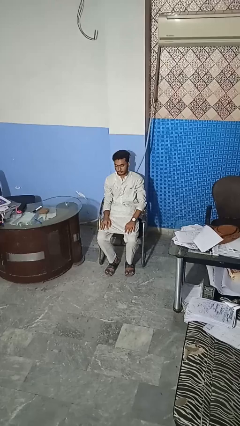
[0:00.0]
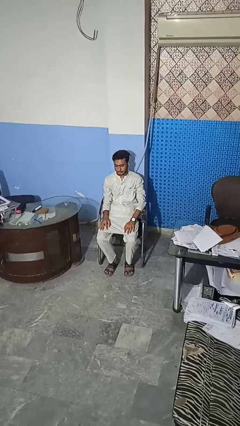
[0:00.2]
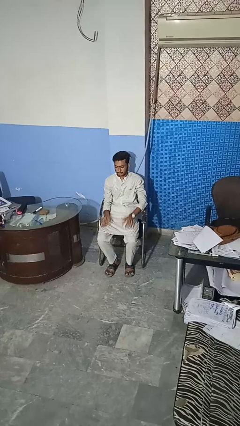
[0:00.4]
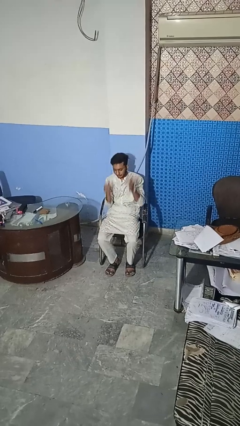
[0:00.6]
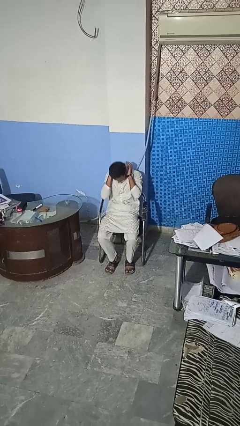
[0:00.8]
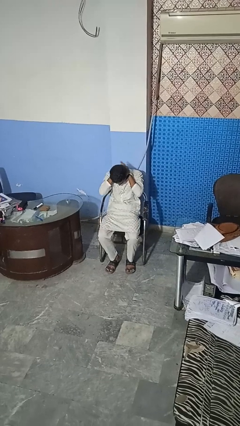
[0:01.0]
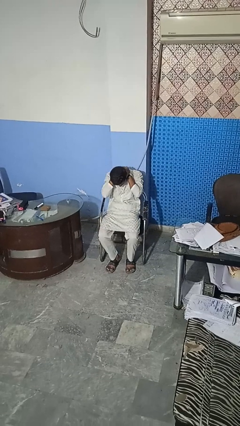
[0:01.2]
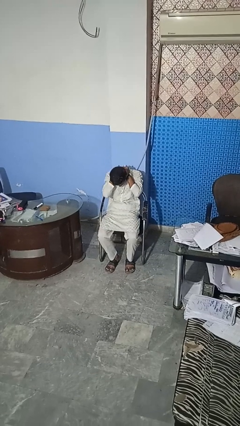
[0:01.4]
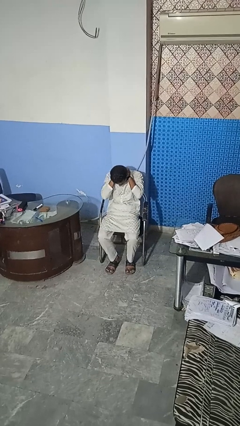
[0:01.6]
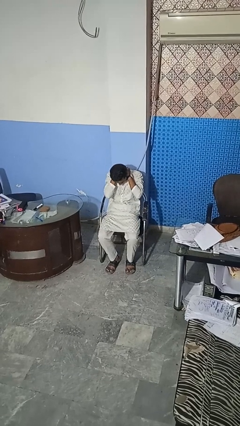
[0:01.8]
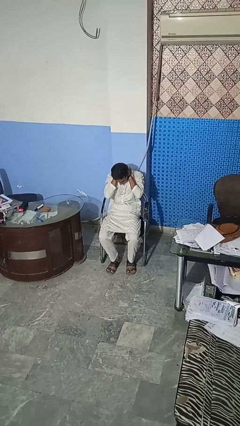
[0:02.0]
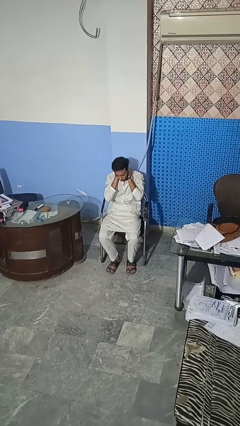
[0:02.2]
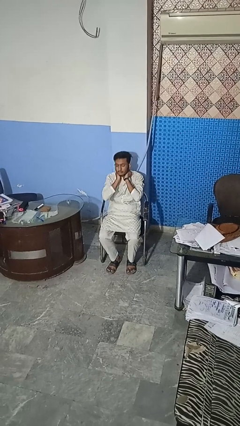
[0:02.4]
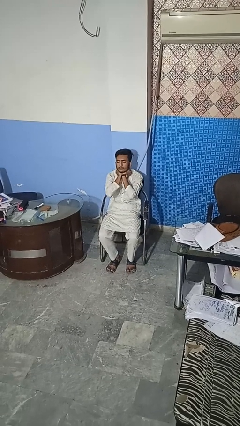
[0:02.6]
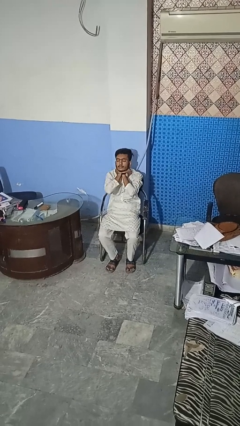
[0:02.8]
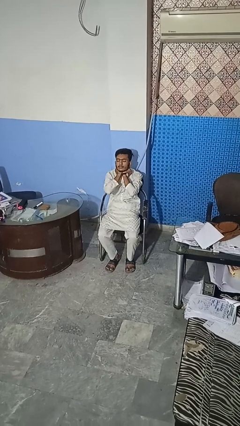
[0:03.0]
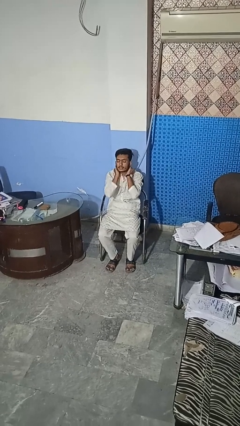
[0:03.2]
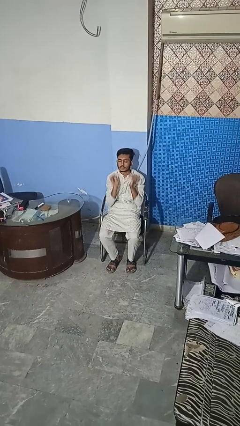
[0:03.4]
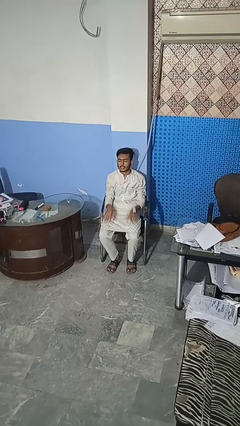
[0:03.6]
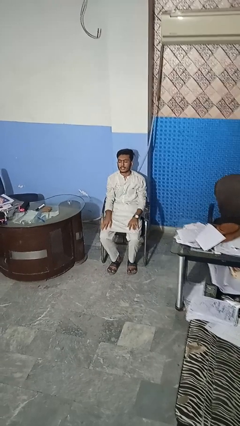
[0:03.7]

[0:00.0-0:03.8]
person rubs neck

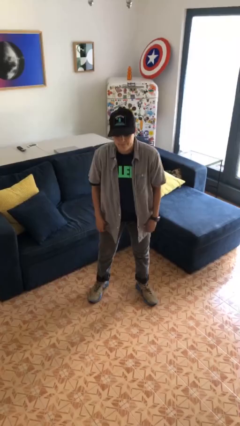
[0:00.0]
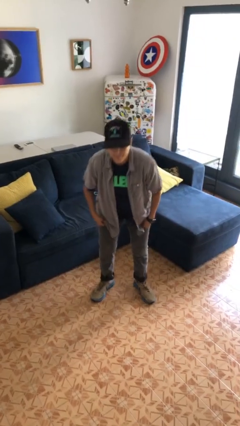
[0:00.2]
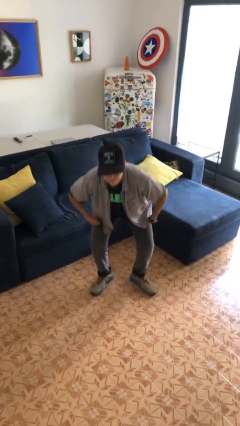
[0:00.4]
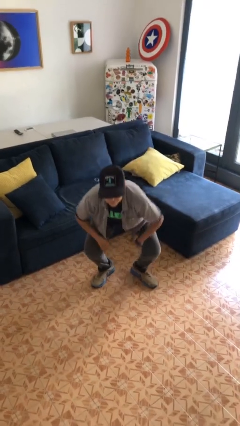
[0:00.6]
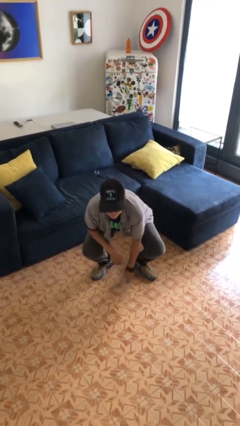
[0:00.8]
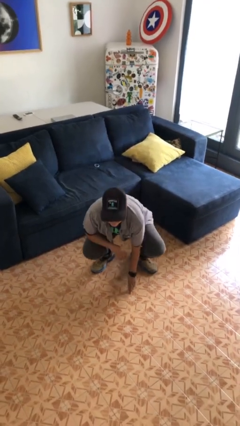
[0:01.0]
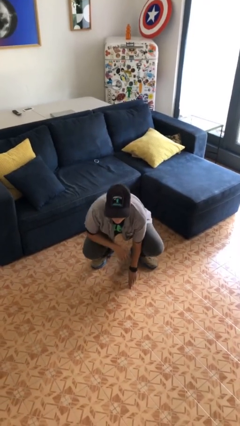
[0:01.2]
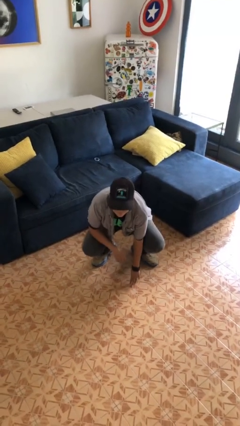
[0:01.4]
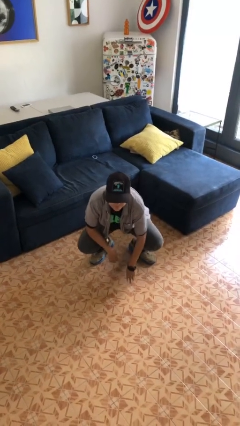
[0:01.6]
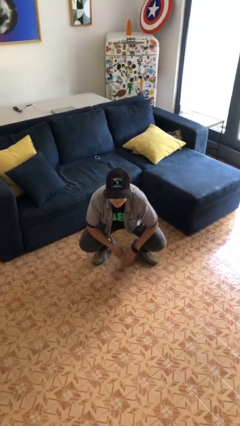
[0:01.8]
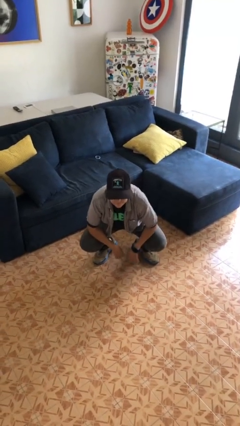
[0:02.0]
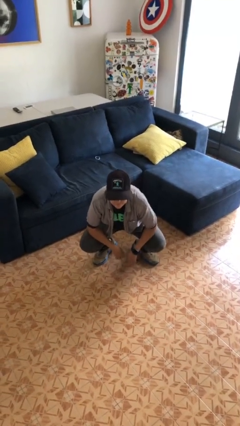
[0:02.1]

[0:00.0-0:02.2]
person squats

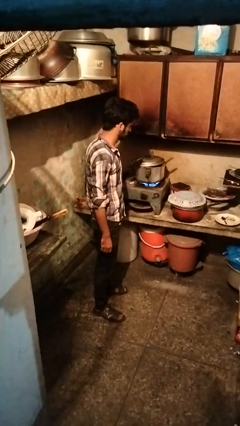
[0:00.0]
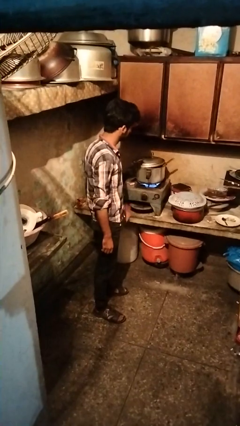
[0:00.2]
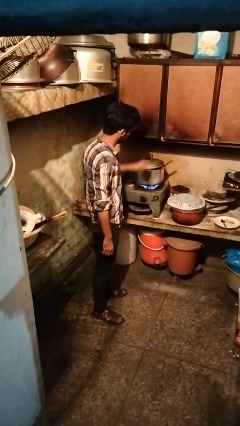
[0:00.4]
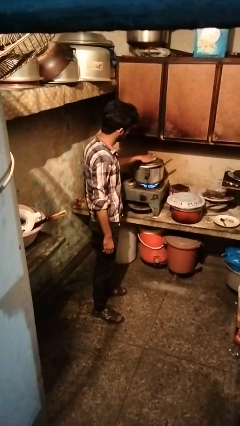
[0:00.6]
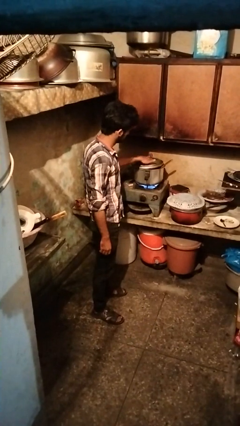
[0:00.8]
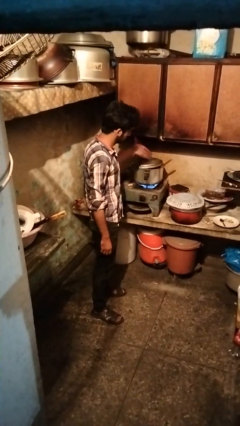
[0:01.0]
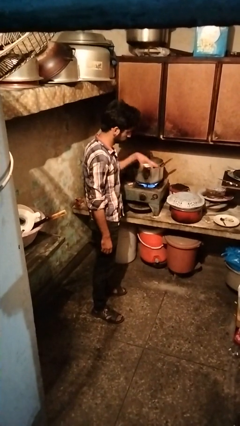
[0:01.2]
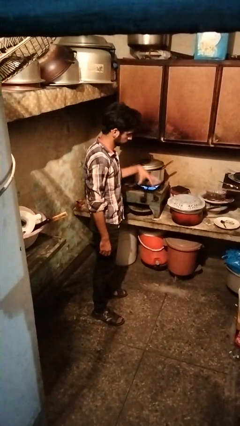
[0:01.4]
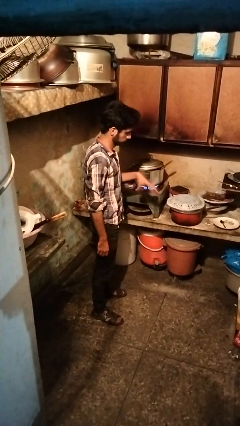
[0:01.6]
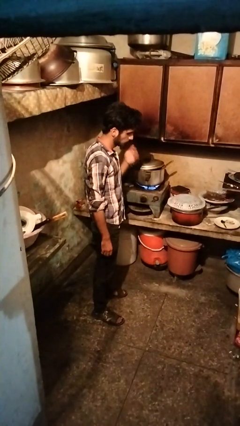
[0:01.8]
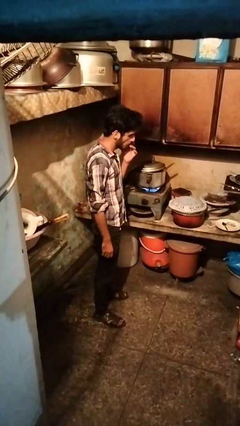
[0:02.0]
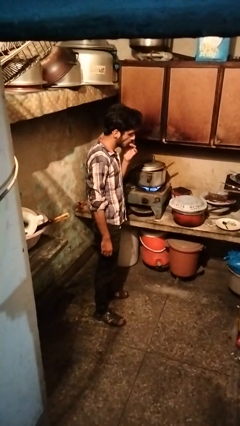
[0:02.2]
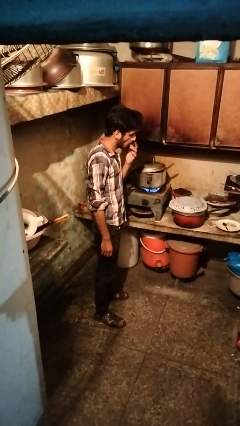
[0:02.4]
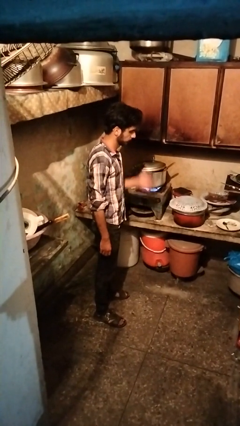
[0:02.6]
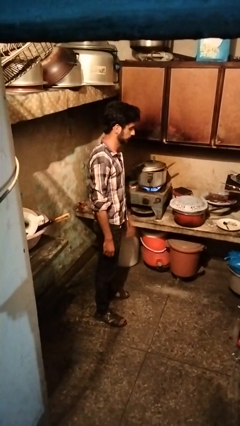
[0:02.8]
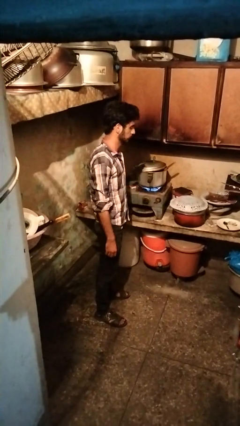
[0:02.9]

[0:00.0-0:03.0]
person burns hand

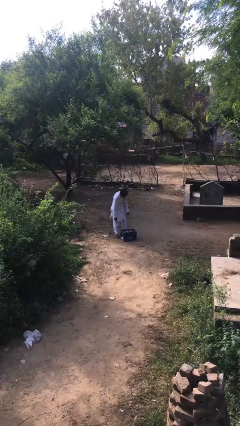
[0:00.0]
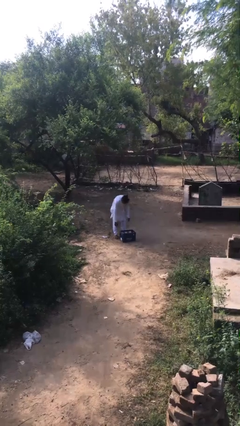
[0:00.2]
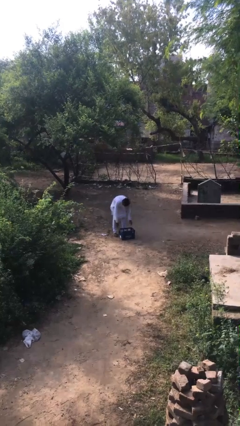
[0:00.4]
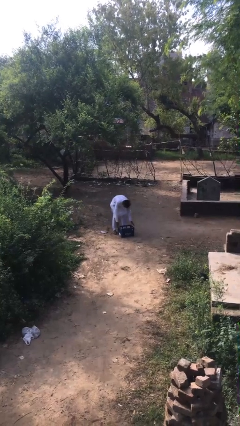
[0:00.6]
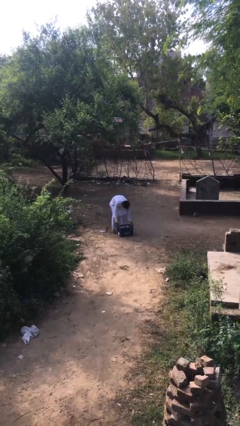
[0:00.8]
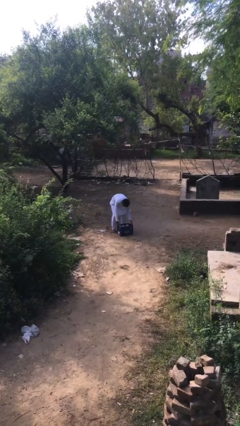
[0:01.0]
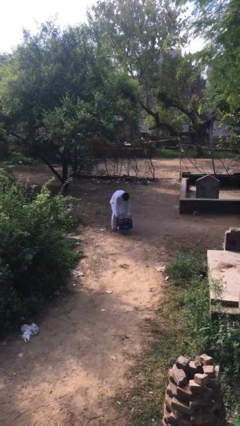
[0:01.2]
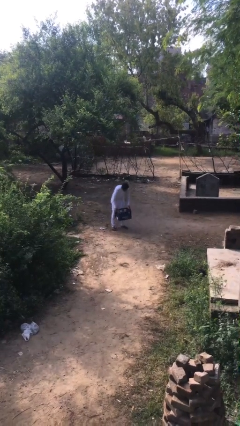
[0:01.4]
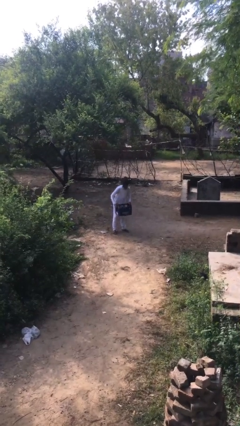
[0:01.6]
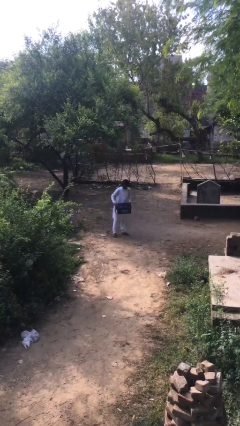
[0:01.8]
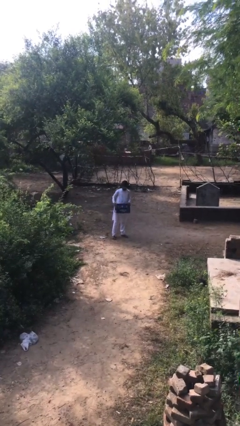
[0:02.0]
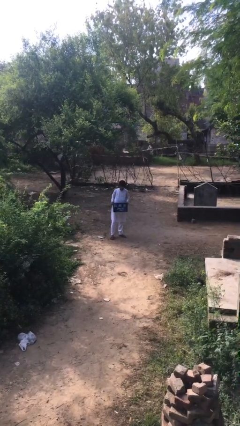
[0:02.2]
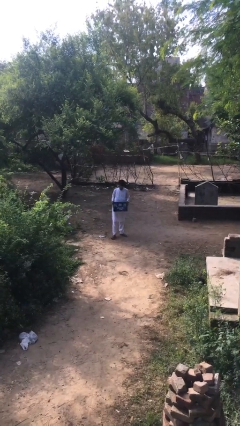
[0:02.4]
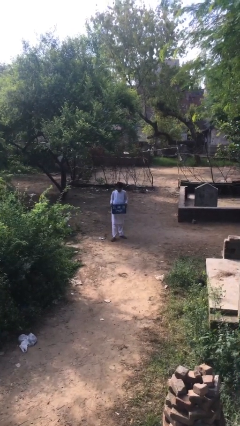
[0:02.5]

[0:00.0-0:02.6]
person picks up object from floor

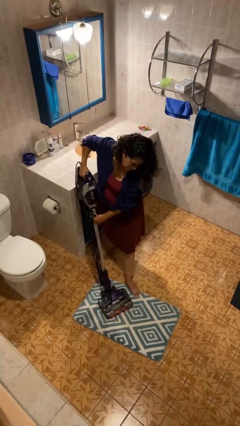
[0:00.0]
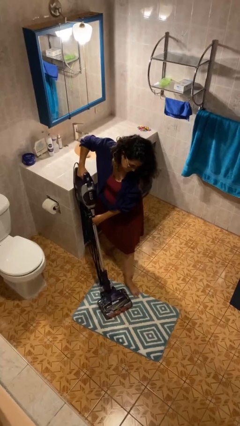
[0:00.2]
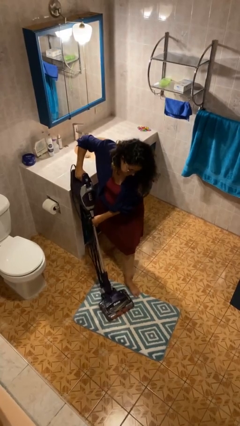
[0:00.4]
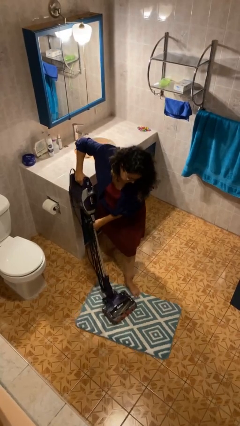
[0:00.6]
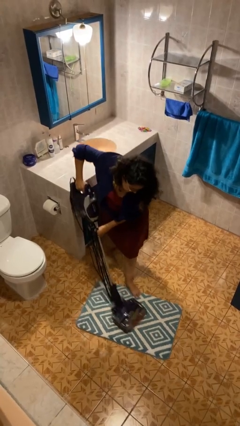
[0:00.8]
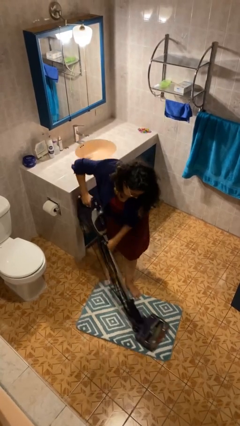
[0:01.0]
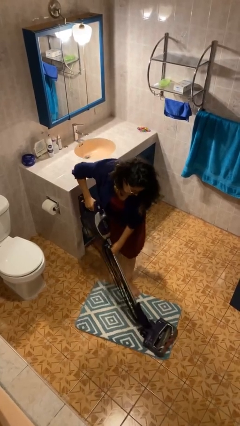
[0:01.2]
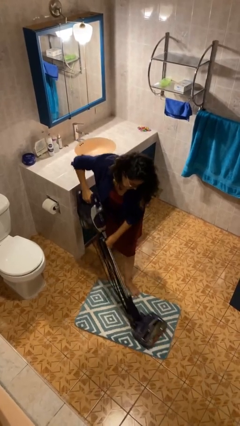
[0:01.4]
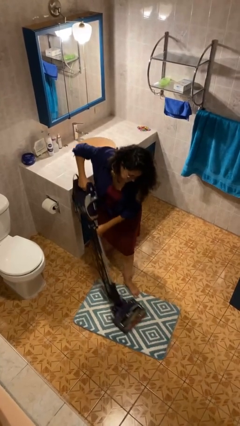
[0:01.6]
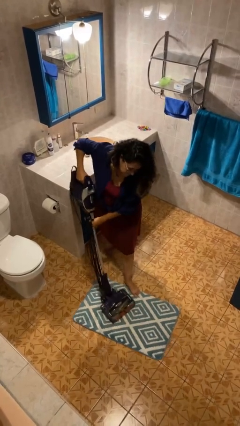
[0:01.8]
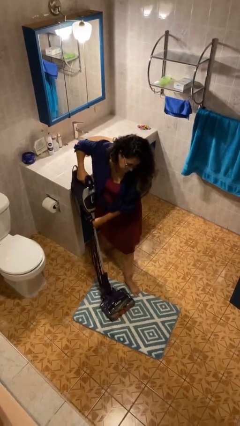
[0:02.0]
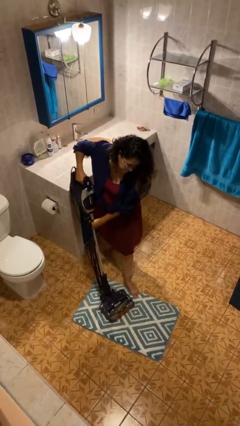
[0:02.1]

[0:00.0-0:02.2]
person vacuums carpet

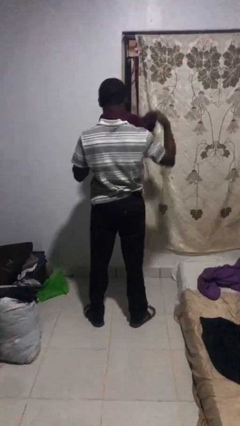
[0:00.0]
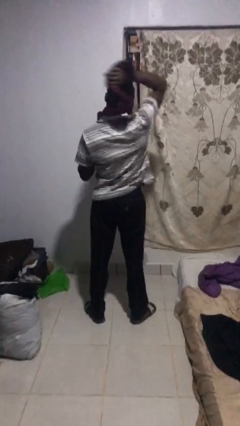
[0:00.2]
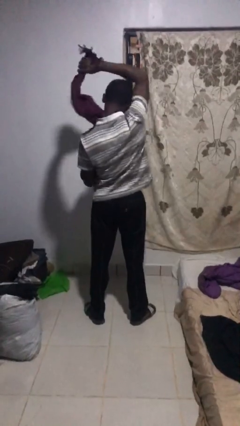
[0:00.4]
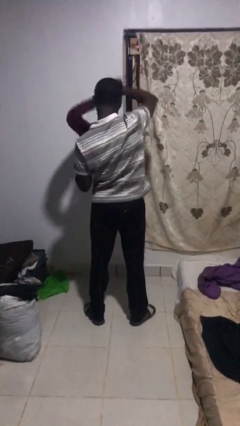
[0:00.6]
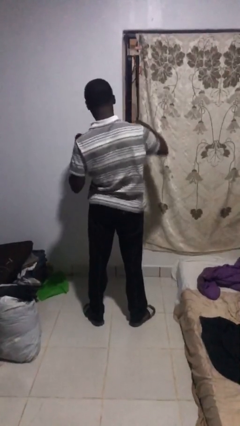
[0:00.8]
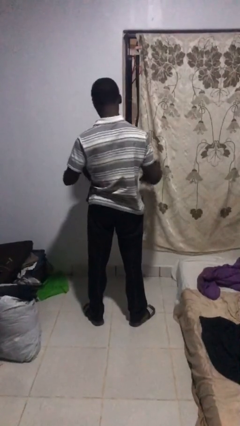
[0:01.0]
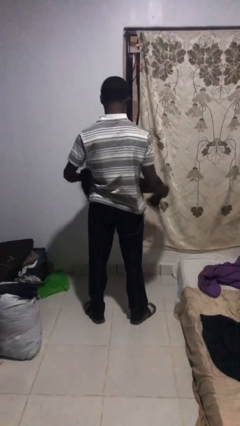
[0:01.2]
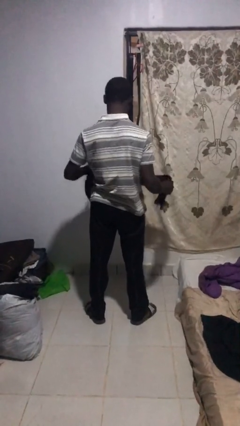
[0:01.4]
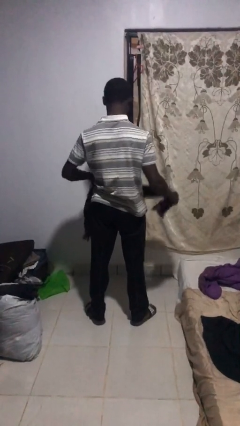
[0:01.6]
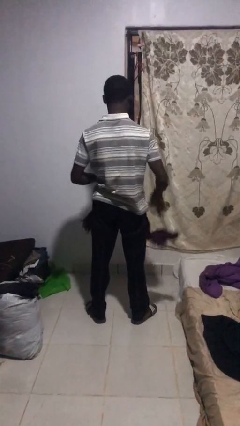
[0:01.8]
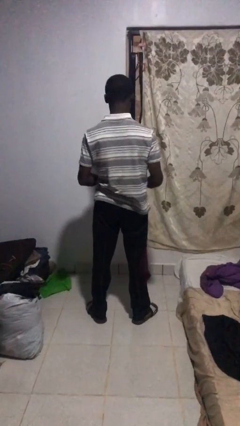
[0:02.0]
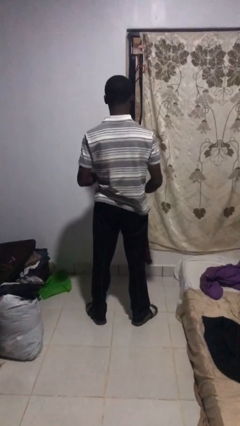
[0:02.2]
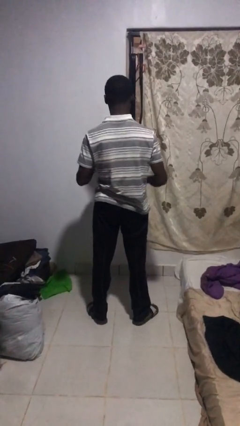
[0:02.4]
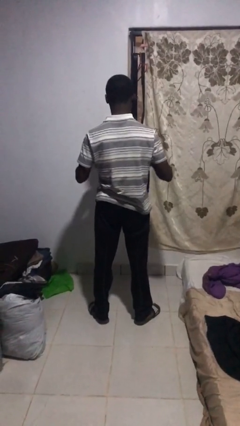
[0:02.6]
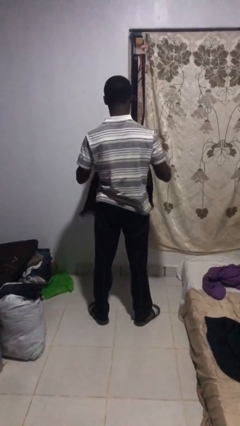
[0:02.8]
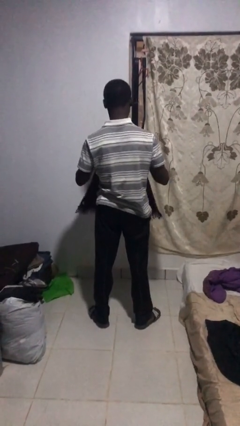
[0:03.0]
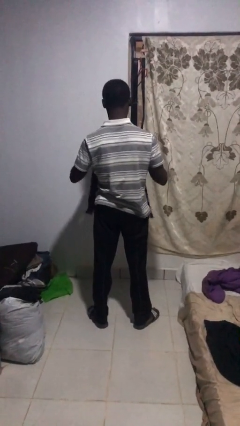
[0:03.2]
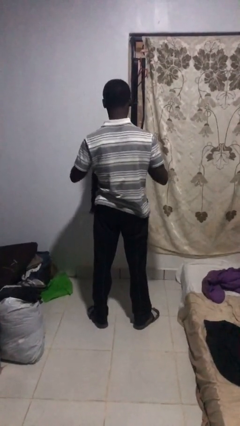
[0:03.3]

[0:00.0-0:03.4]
person takes off scarf
